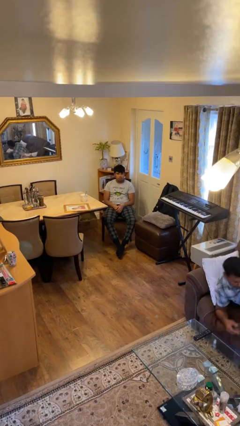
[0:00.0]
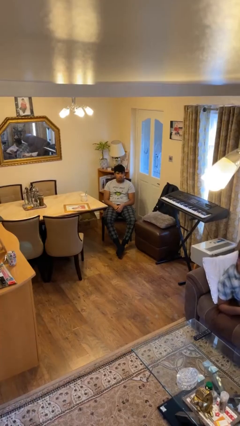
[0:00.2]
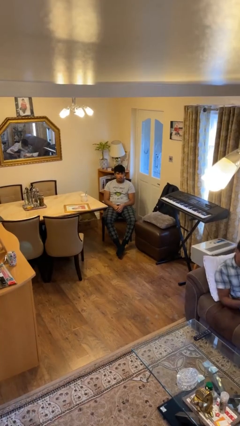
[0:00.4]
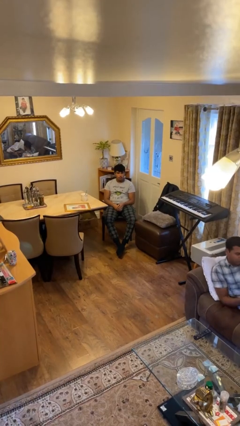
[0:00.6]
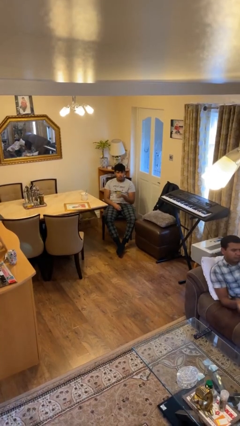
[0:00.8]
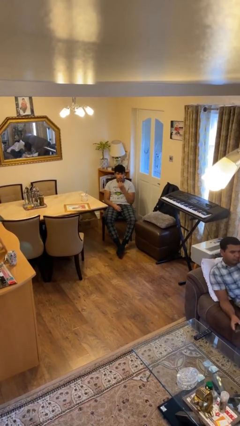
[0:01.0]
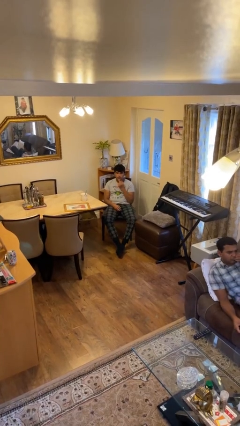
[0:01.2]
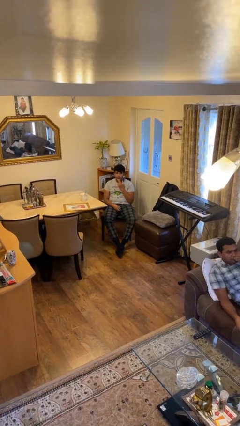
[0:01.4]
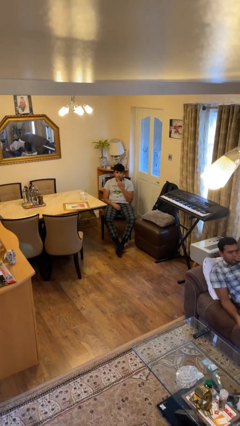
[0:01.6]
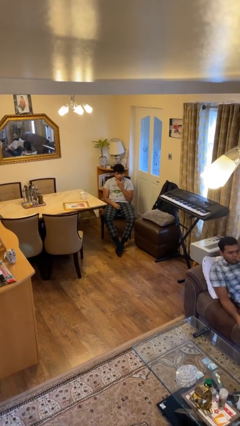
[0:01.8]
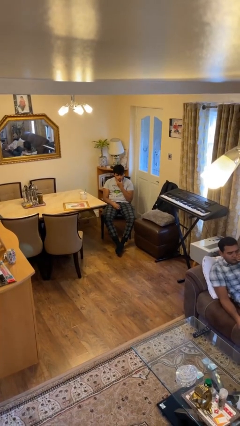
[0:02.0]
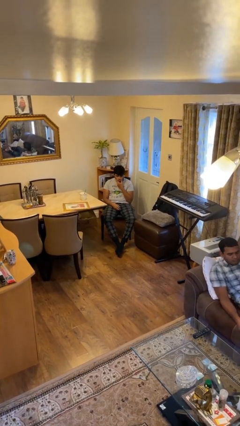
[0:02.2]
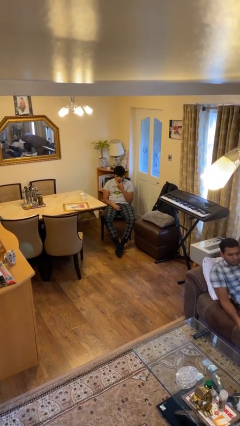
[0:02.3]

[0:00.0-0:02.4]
person strokes chin

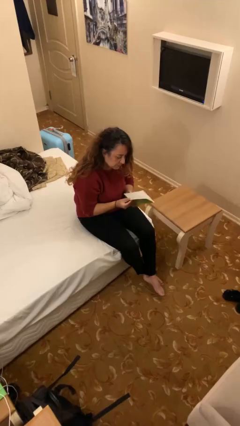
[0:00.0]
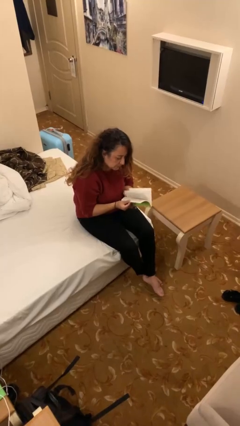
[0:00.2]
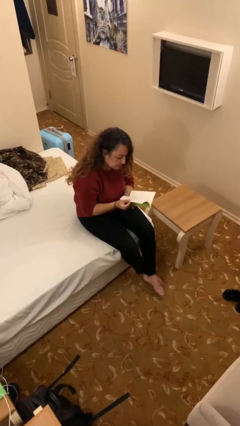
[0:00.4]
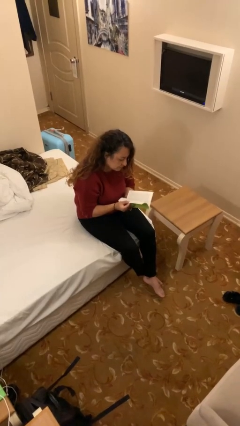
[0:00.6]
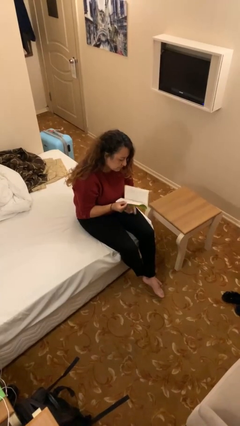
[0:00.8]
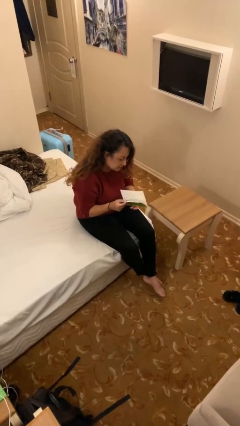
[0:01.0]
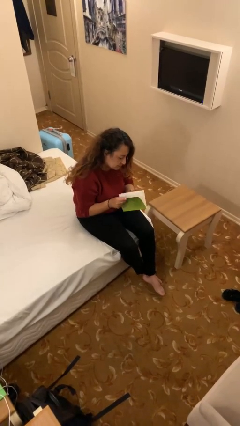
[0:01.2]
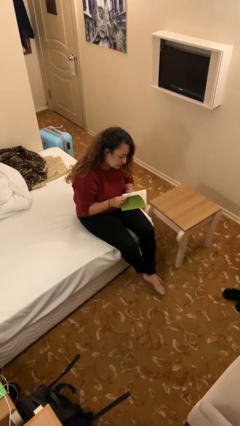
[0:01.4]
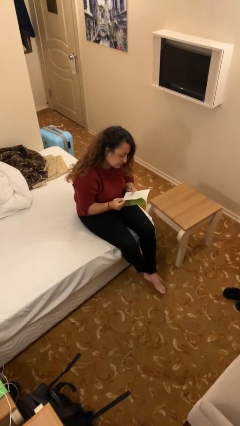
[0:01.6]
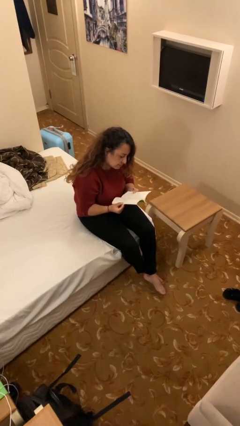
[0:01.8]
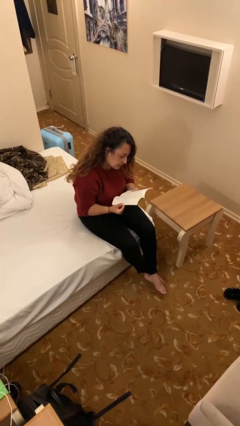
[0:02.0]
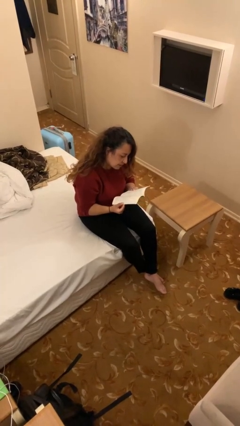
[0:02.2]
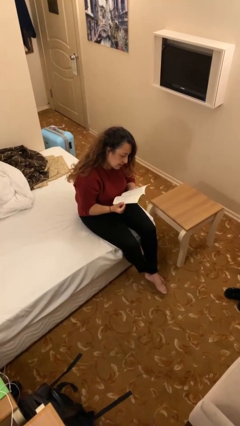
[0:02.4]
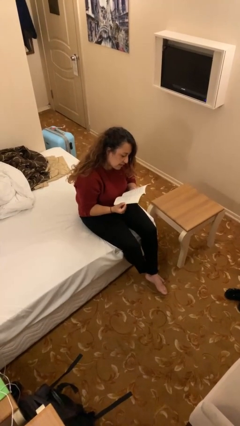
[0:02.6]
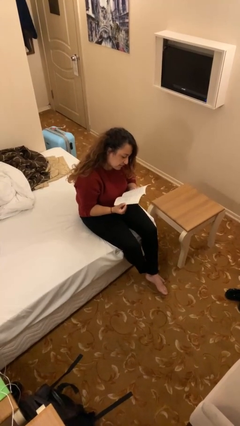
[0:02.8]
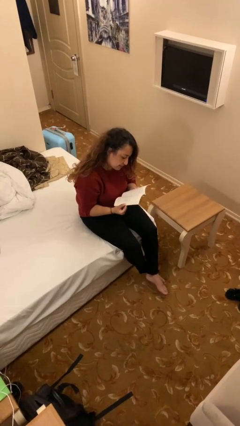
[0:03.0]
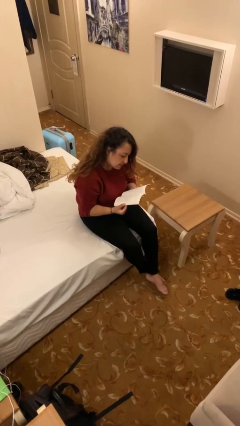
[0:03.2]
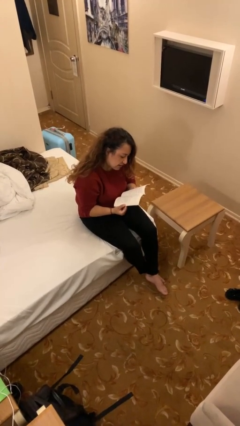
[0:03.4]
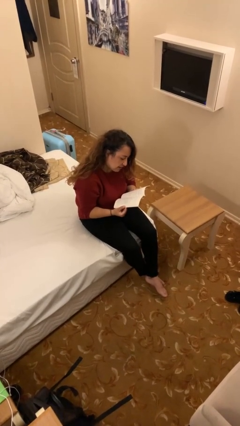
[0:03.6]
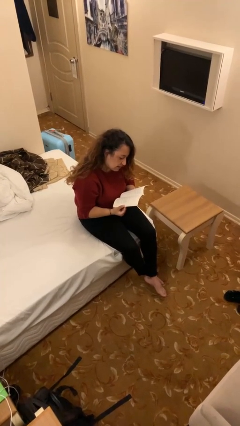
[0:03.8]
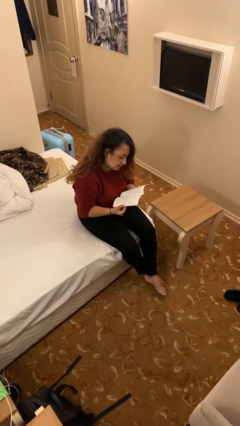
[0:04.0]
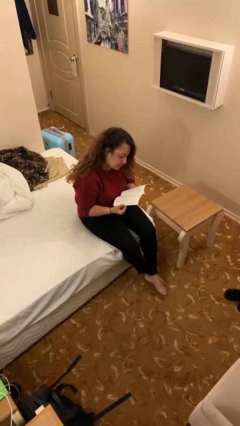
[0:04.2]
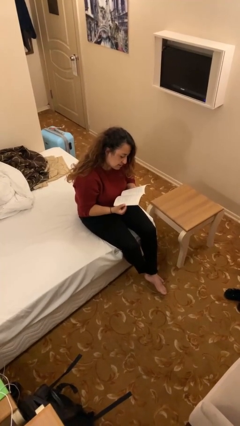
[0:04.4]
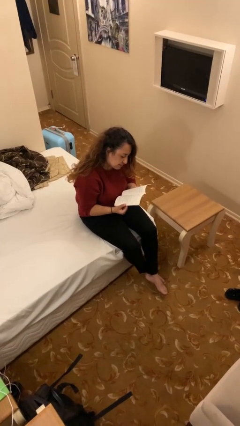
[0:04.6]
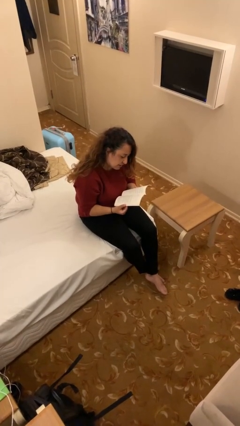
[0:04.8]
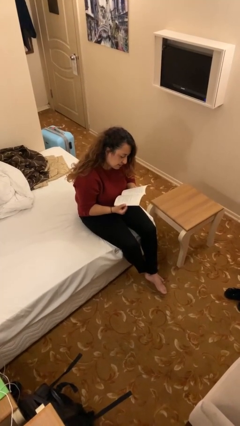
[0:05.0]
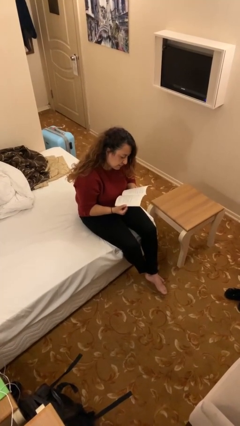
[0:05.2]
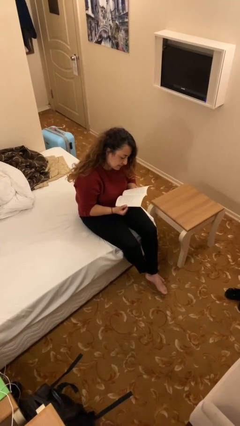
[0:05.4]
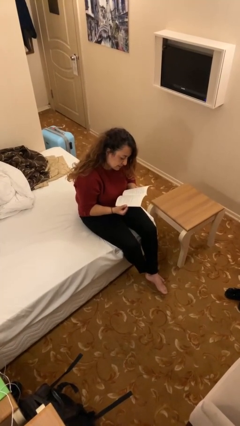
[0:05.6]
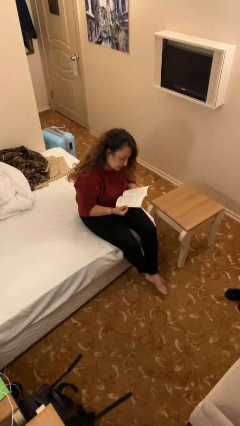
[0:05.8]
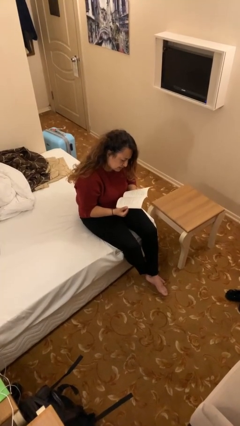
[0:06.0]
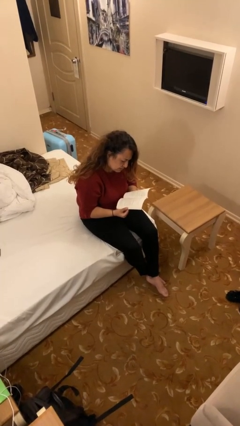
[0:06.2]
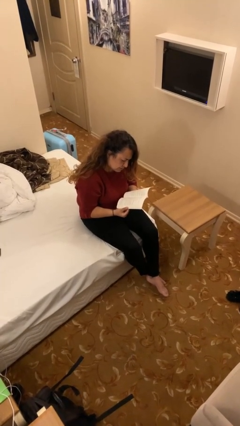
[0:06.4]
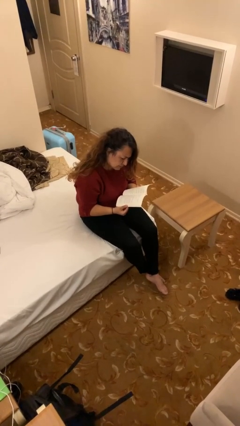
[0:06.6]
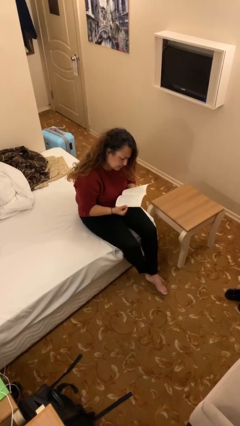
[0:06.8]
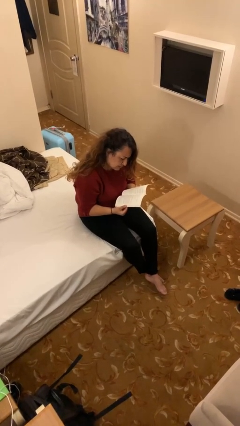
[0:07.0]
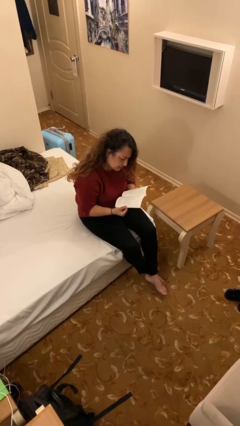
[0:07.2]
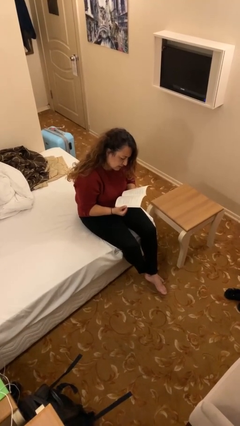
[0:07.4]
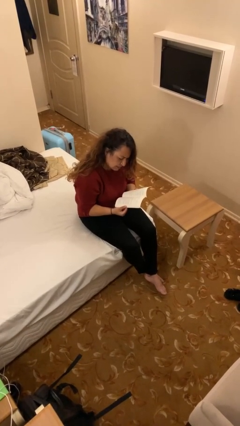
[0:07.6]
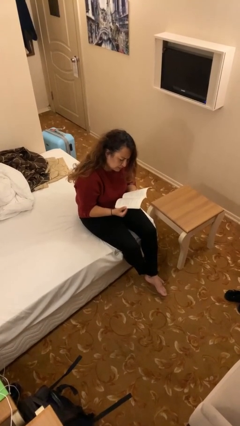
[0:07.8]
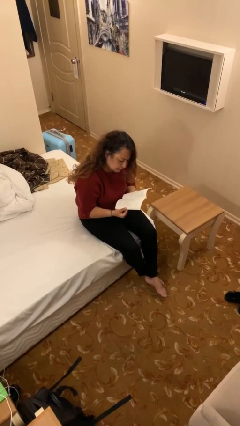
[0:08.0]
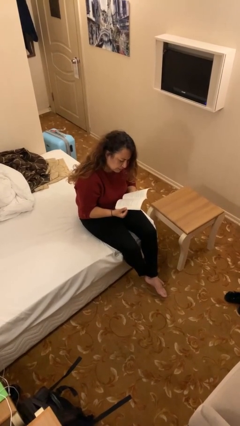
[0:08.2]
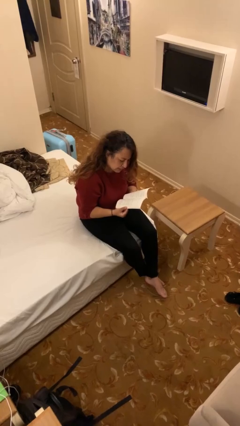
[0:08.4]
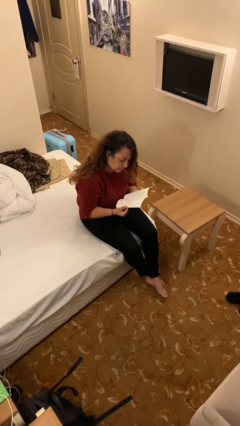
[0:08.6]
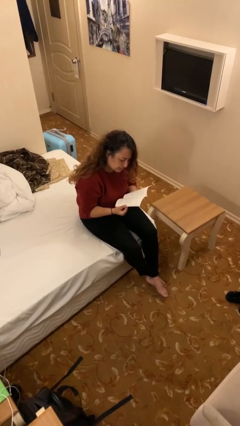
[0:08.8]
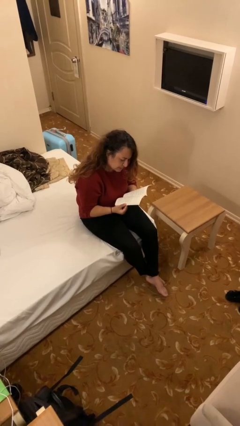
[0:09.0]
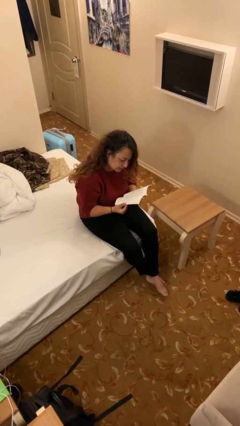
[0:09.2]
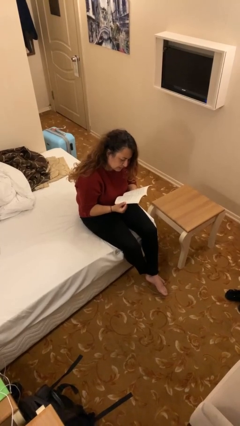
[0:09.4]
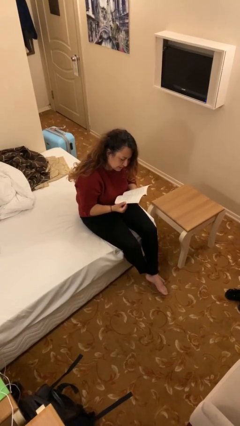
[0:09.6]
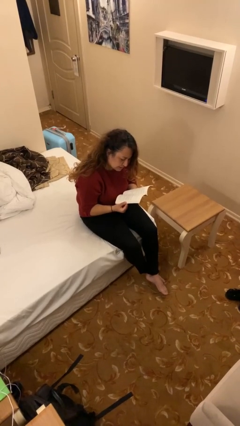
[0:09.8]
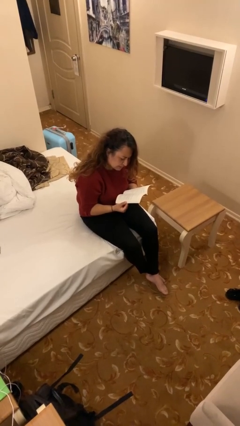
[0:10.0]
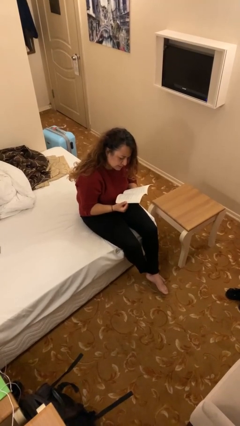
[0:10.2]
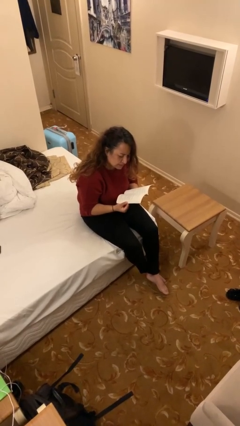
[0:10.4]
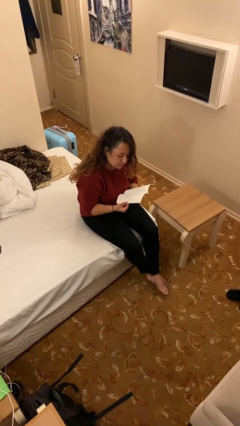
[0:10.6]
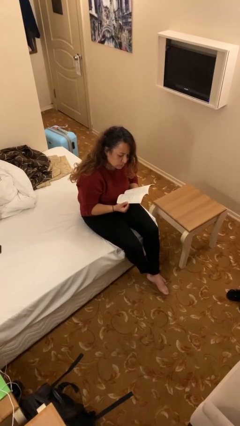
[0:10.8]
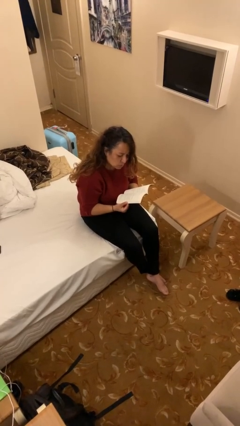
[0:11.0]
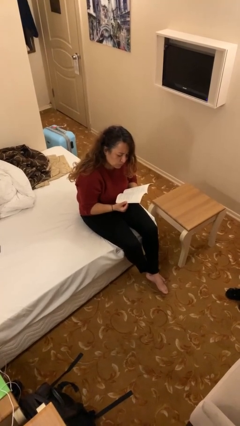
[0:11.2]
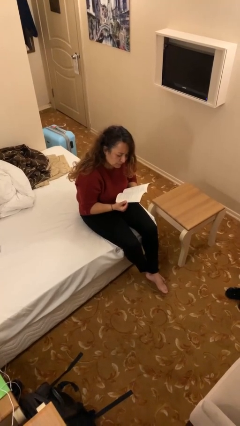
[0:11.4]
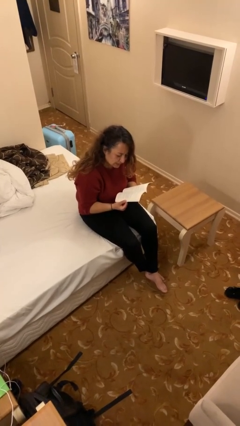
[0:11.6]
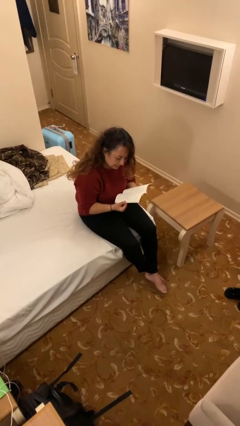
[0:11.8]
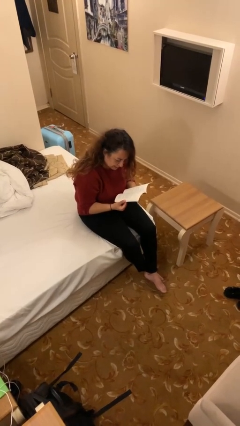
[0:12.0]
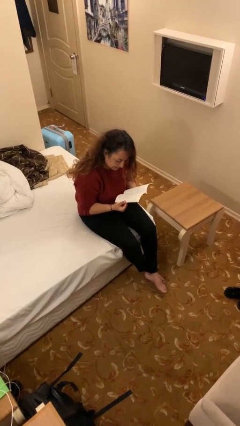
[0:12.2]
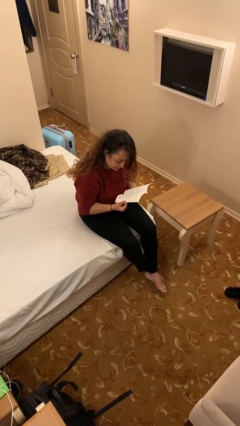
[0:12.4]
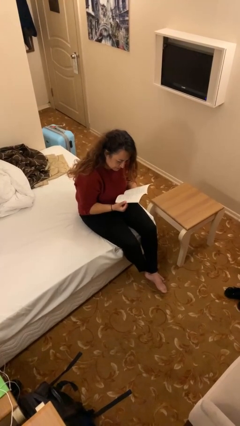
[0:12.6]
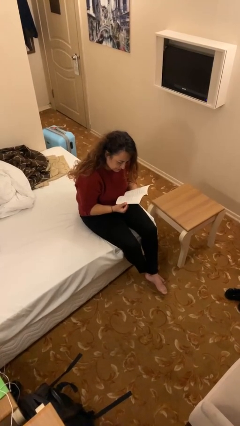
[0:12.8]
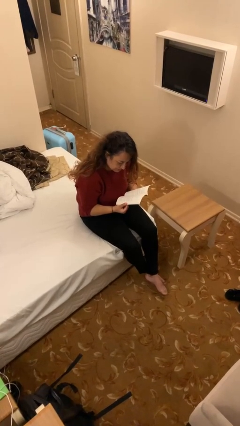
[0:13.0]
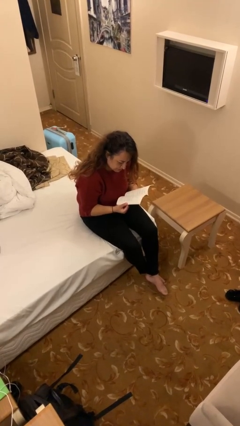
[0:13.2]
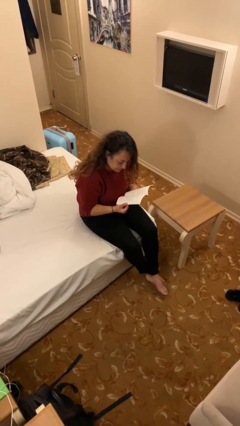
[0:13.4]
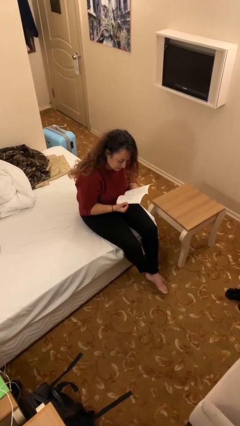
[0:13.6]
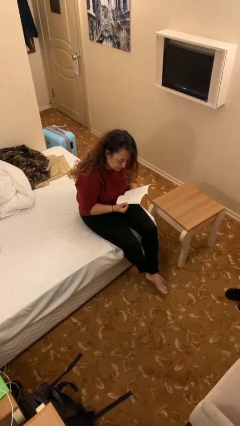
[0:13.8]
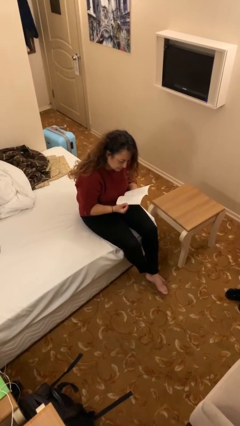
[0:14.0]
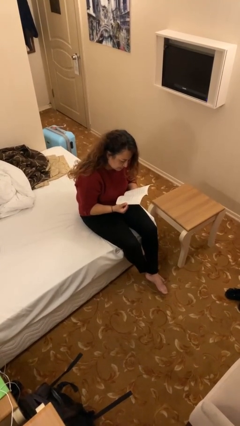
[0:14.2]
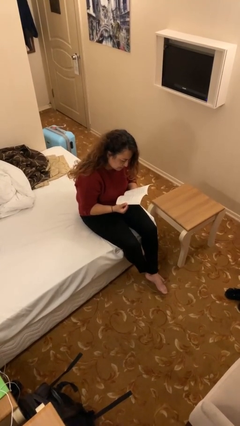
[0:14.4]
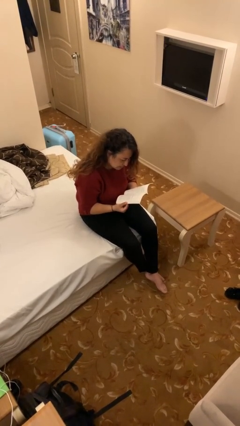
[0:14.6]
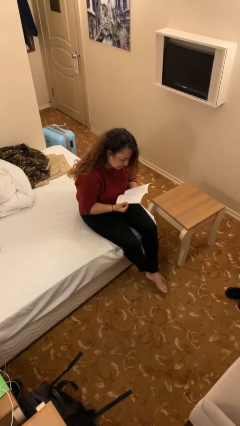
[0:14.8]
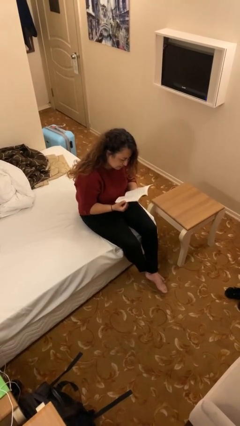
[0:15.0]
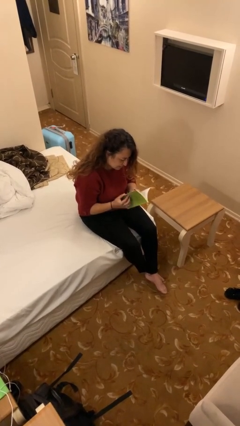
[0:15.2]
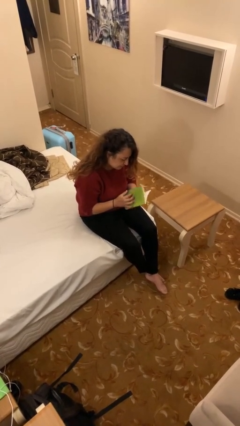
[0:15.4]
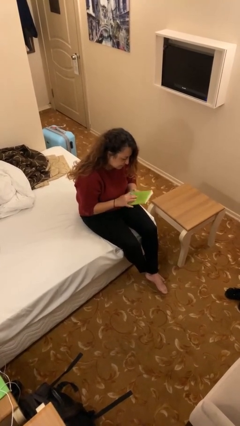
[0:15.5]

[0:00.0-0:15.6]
person reads document
